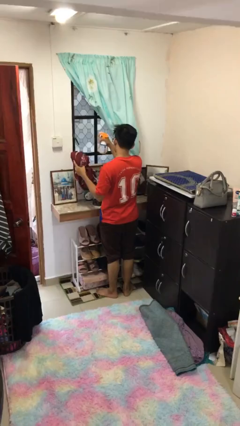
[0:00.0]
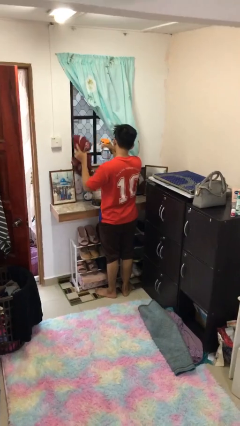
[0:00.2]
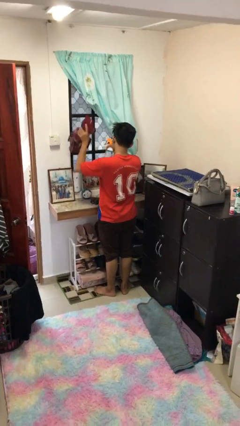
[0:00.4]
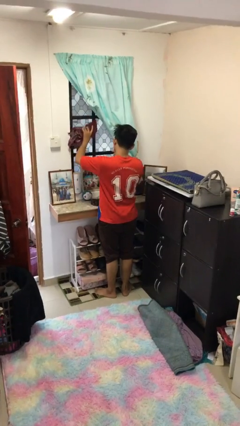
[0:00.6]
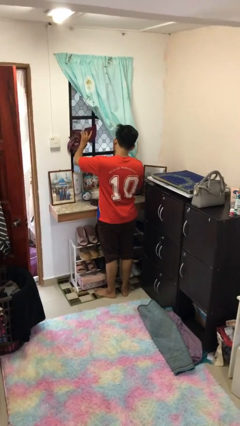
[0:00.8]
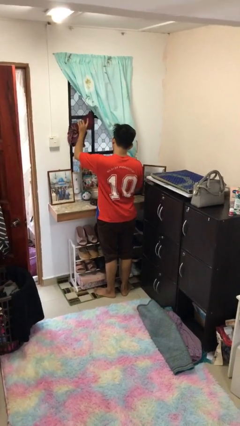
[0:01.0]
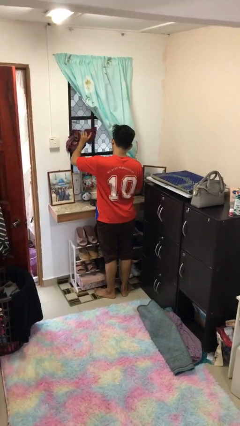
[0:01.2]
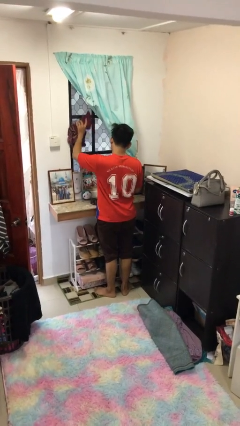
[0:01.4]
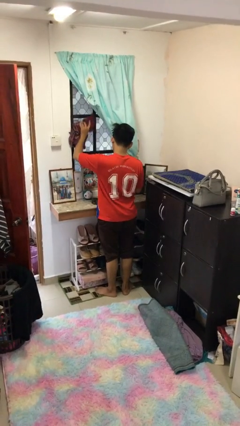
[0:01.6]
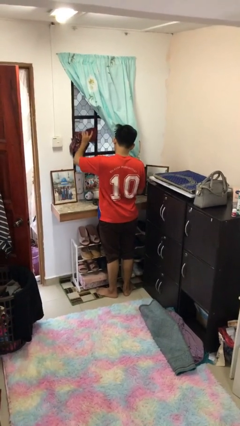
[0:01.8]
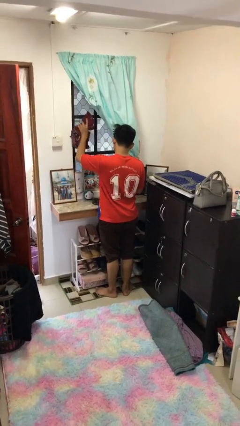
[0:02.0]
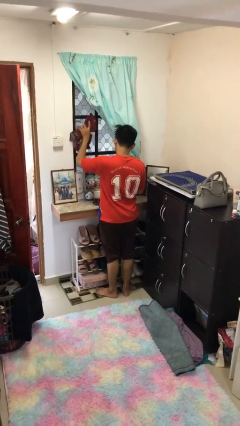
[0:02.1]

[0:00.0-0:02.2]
person washes window

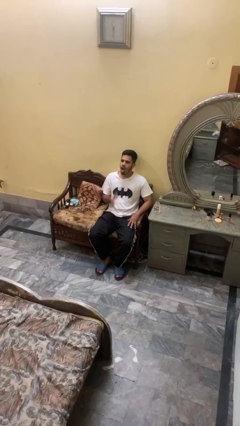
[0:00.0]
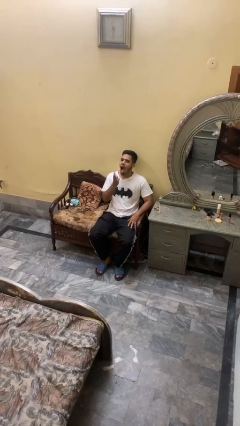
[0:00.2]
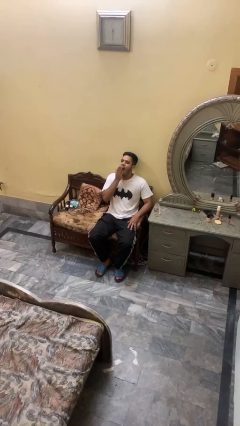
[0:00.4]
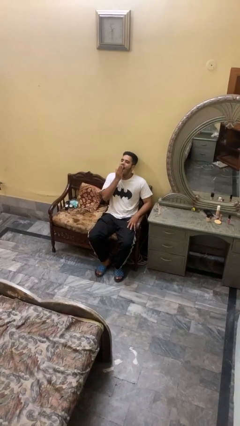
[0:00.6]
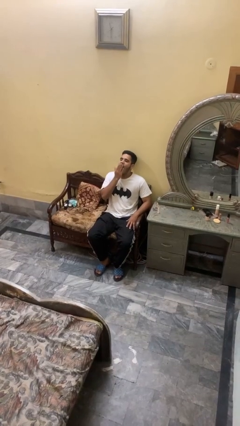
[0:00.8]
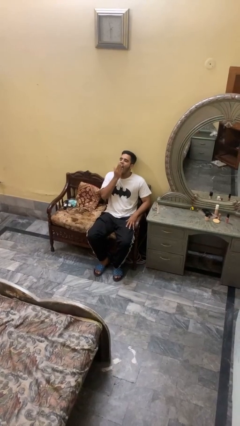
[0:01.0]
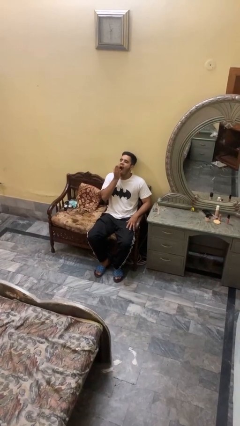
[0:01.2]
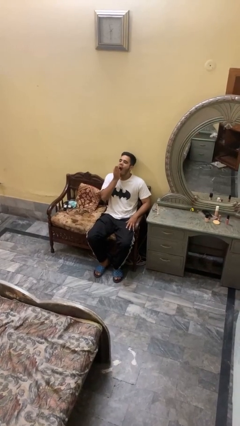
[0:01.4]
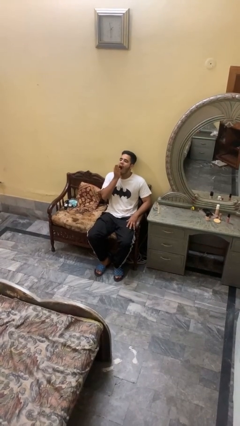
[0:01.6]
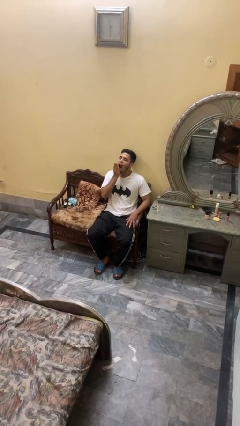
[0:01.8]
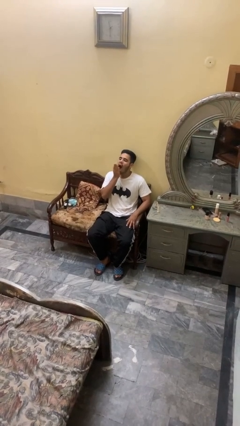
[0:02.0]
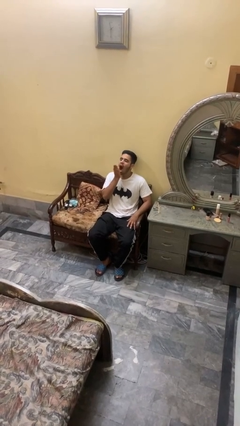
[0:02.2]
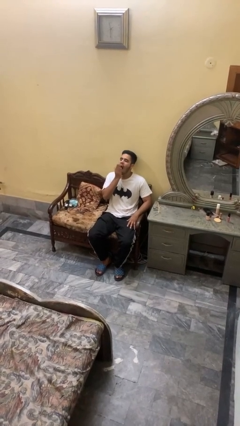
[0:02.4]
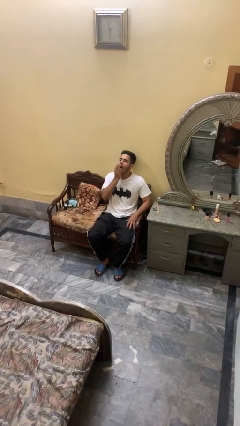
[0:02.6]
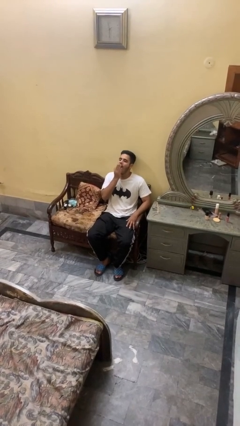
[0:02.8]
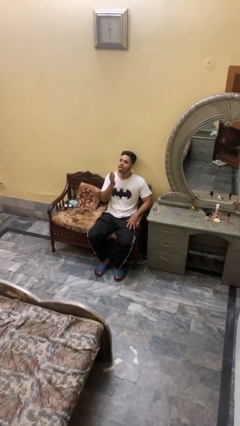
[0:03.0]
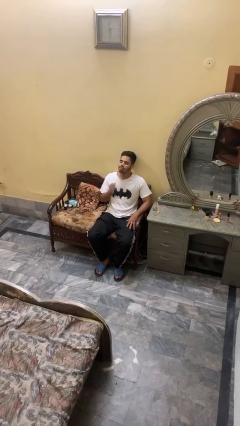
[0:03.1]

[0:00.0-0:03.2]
person yawns

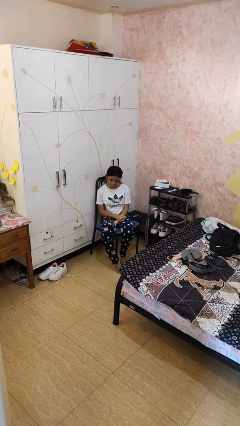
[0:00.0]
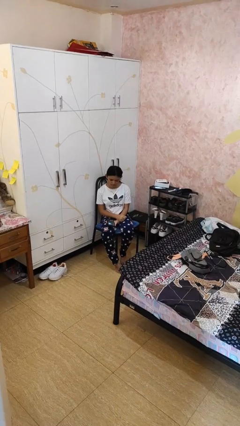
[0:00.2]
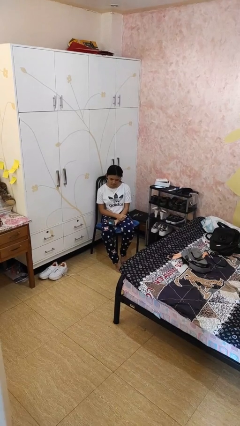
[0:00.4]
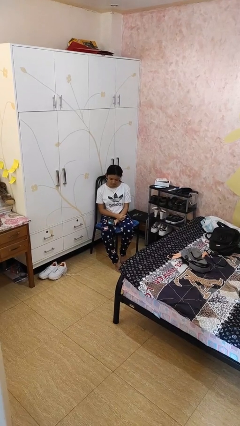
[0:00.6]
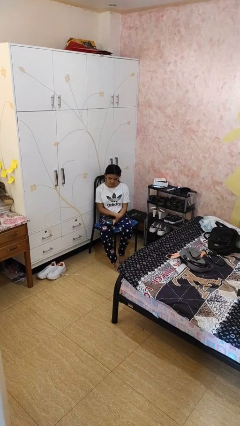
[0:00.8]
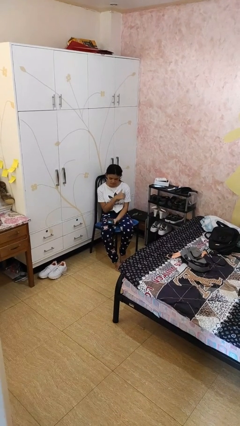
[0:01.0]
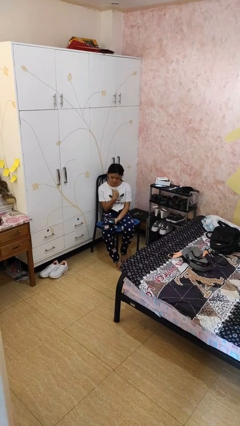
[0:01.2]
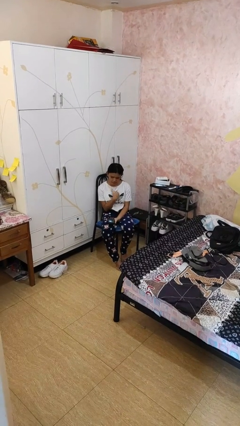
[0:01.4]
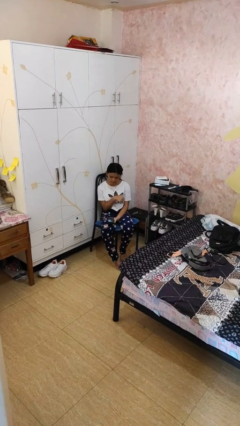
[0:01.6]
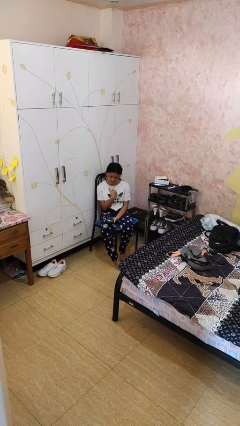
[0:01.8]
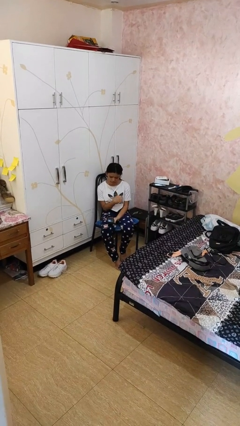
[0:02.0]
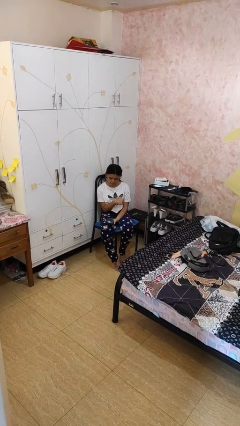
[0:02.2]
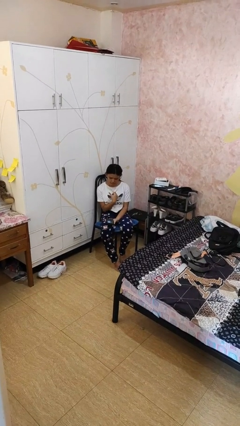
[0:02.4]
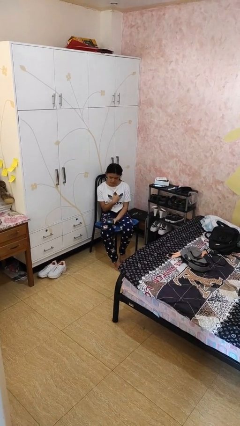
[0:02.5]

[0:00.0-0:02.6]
person gestures cut

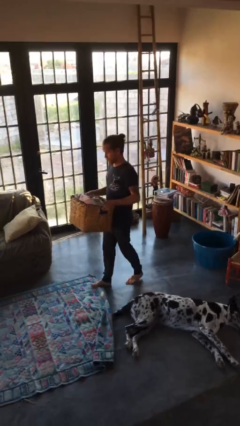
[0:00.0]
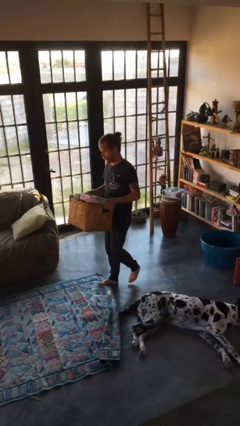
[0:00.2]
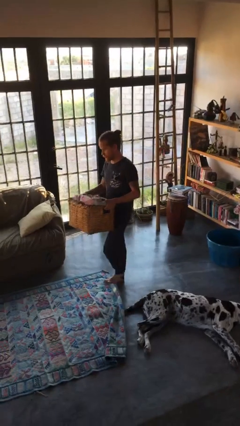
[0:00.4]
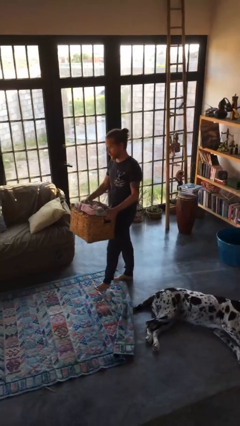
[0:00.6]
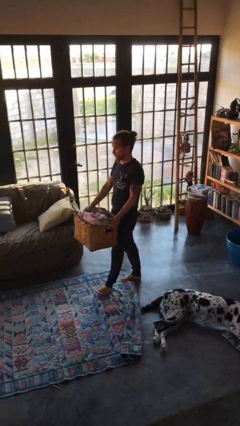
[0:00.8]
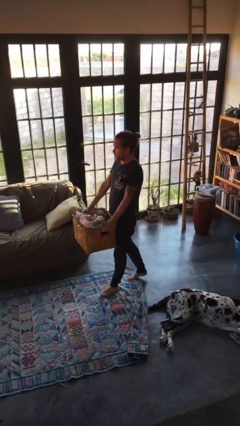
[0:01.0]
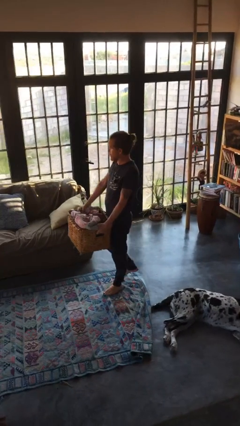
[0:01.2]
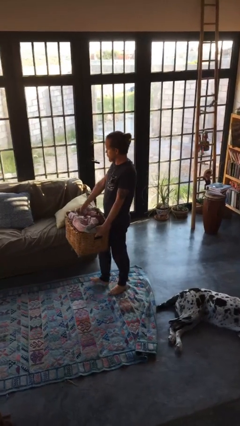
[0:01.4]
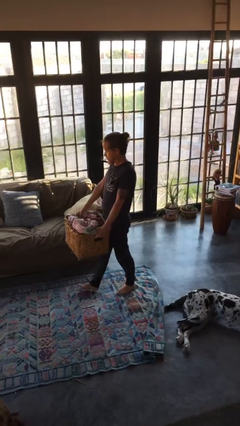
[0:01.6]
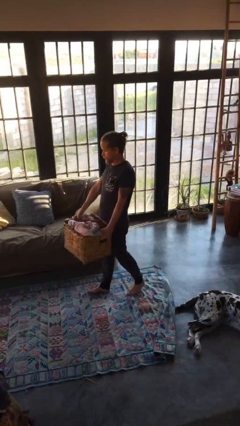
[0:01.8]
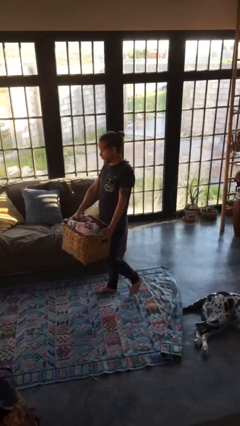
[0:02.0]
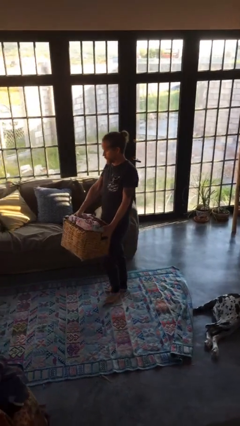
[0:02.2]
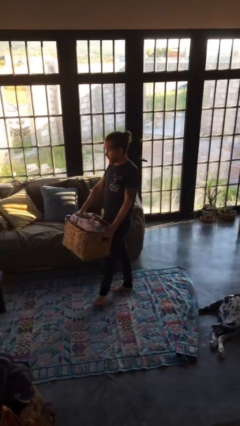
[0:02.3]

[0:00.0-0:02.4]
person carries laundry basket

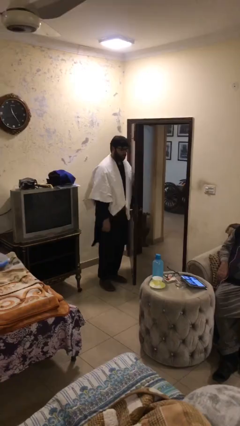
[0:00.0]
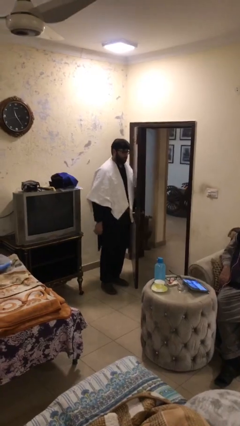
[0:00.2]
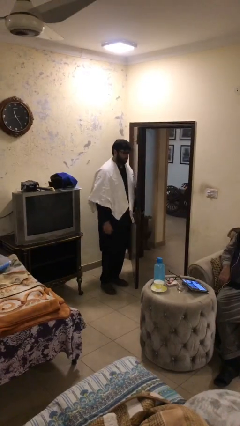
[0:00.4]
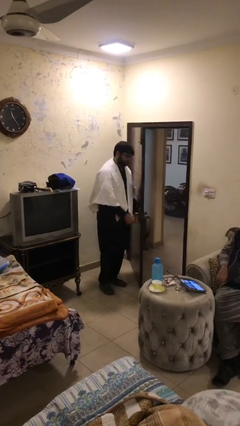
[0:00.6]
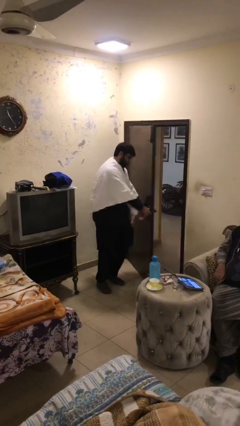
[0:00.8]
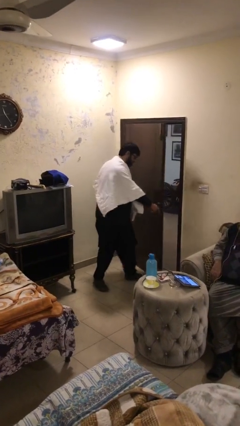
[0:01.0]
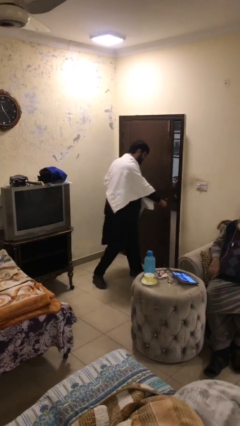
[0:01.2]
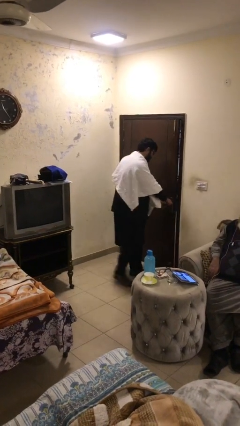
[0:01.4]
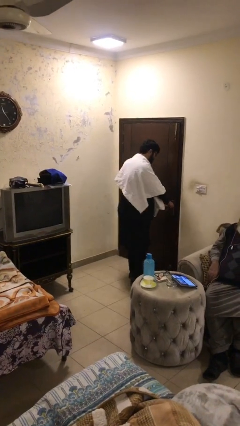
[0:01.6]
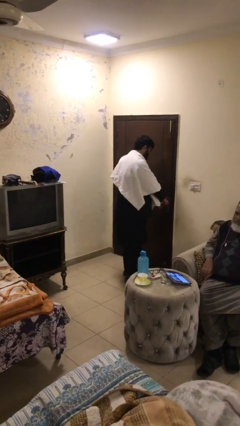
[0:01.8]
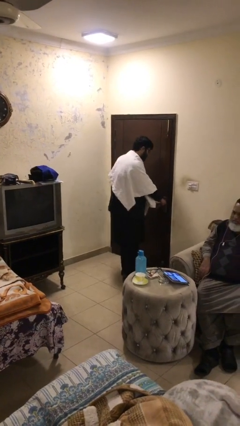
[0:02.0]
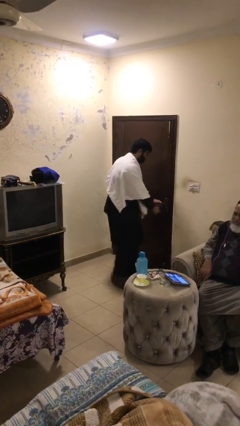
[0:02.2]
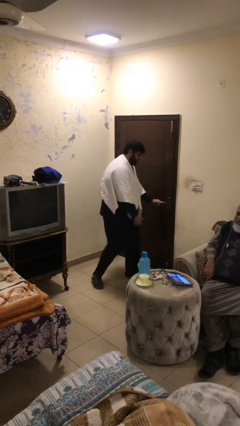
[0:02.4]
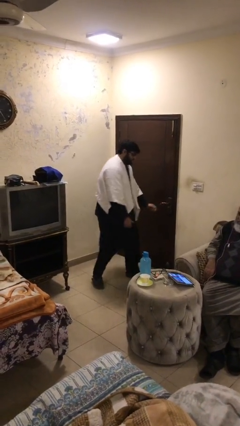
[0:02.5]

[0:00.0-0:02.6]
person closes facility door

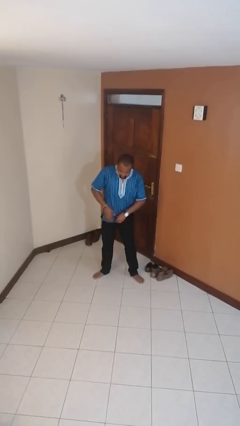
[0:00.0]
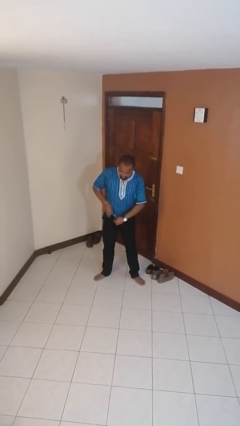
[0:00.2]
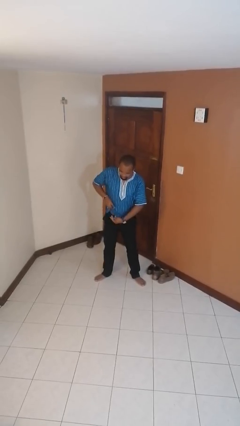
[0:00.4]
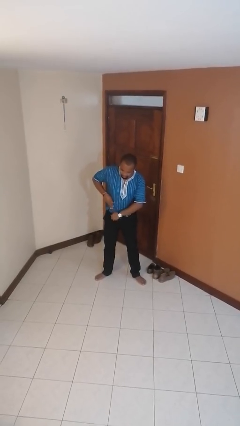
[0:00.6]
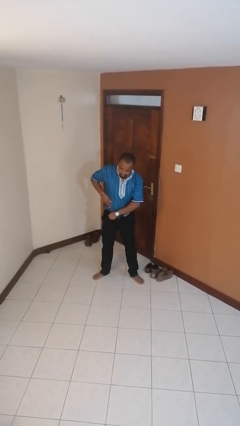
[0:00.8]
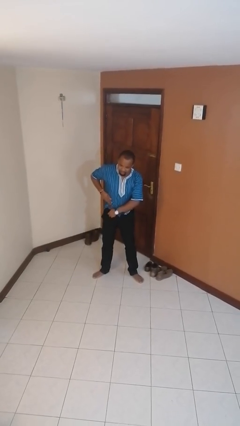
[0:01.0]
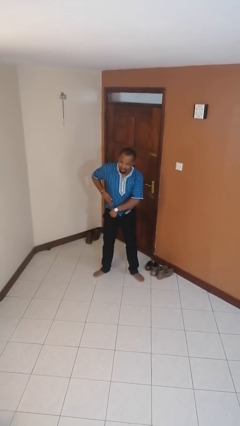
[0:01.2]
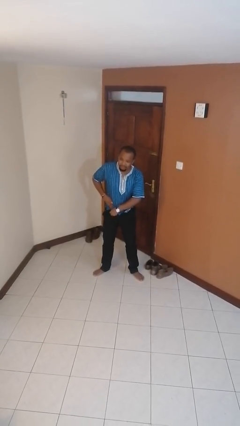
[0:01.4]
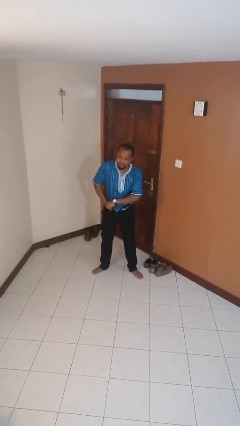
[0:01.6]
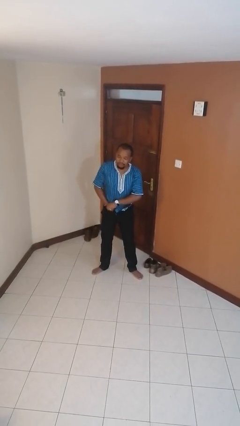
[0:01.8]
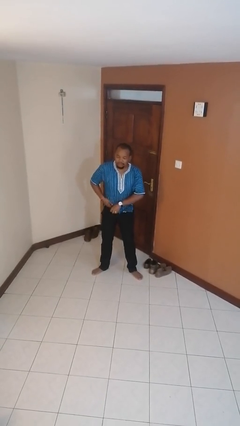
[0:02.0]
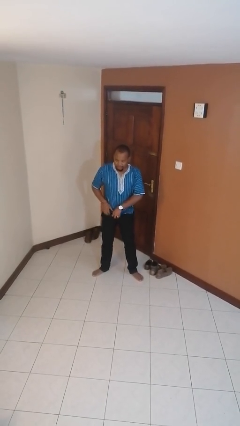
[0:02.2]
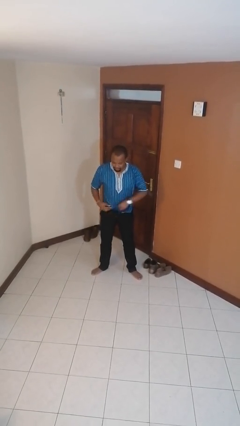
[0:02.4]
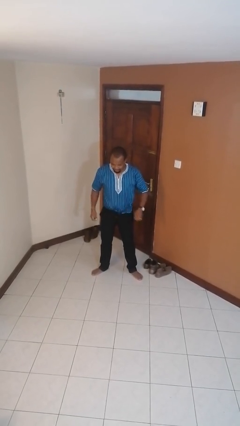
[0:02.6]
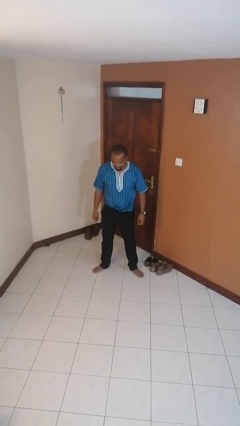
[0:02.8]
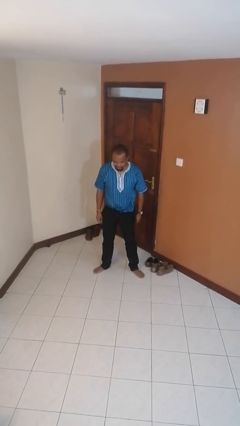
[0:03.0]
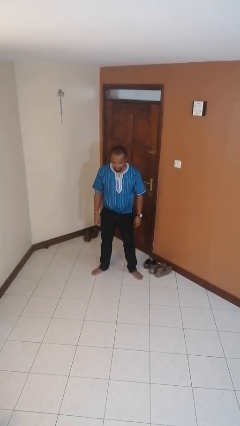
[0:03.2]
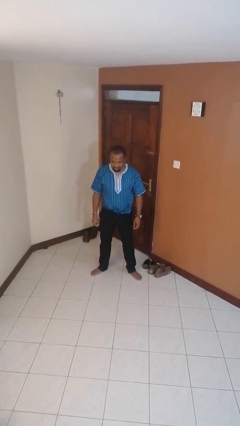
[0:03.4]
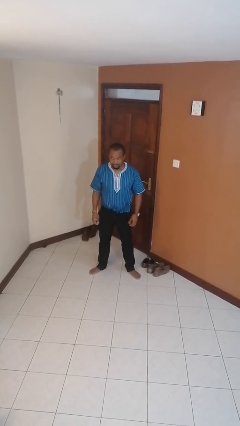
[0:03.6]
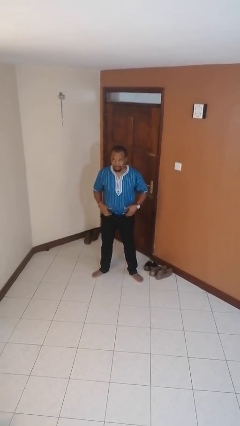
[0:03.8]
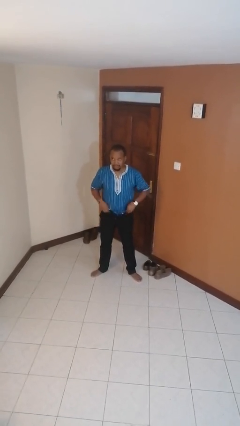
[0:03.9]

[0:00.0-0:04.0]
person tucks in shirt

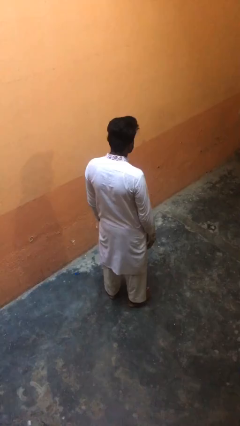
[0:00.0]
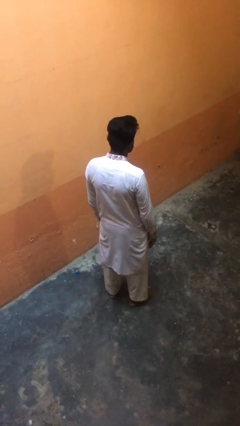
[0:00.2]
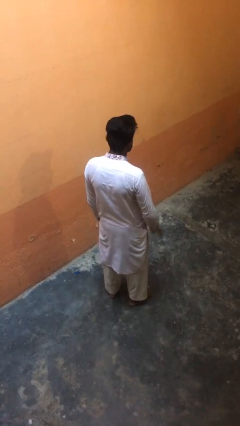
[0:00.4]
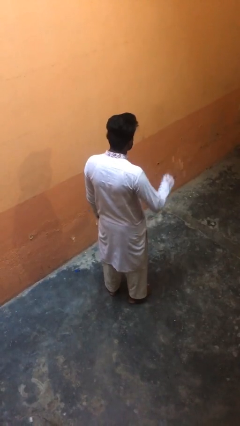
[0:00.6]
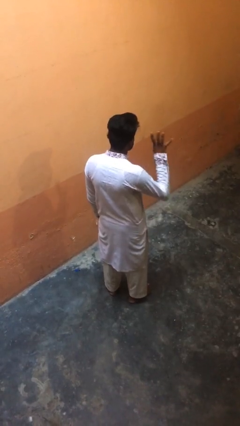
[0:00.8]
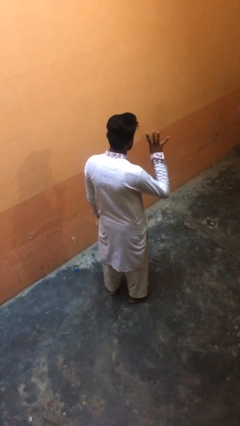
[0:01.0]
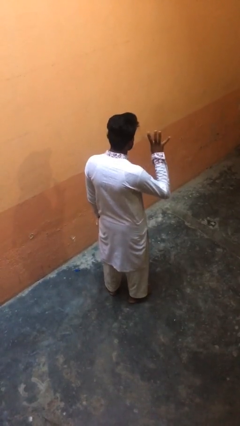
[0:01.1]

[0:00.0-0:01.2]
person gestures number four
